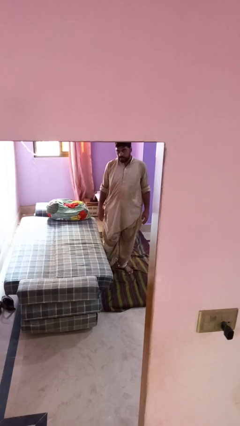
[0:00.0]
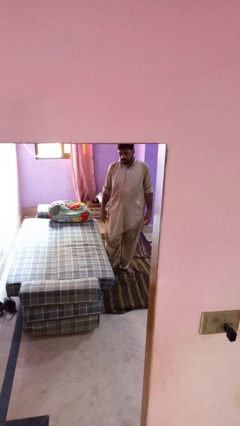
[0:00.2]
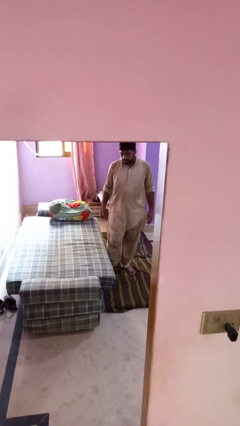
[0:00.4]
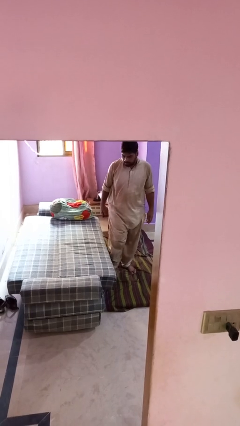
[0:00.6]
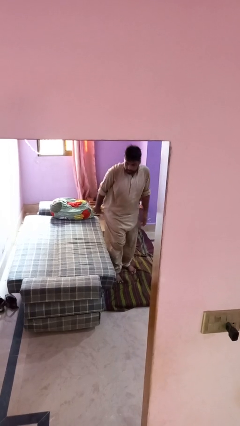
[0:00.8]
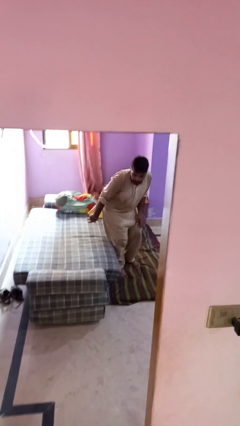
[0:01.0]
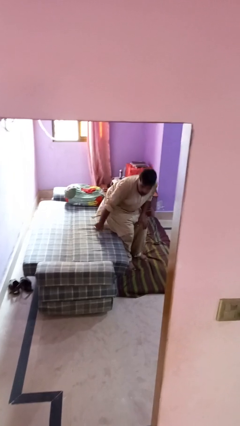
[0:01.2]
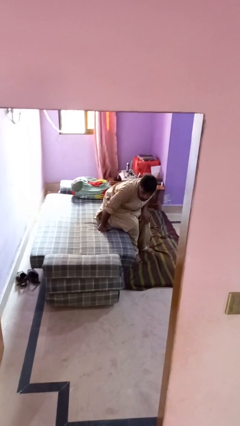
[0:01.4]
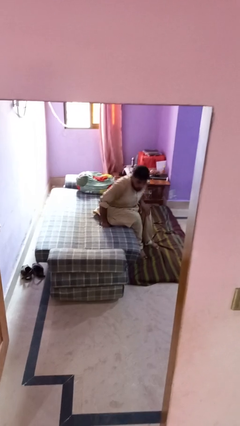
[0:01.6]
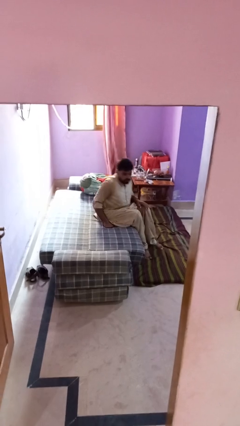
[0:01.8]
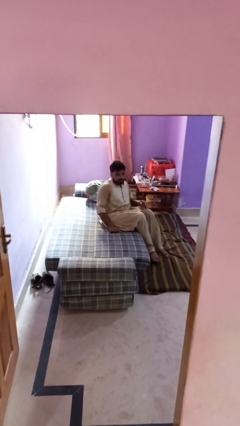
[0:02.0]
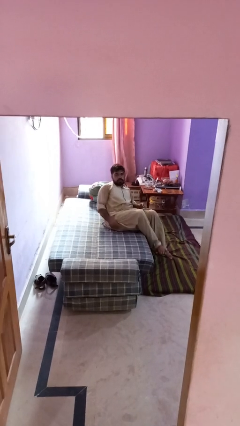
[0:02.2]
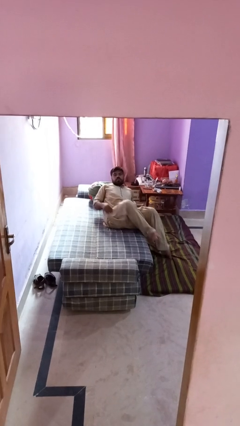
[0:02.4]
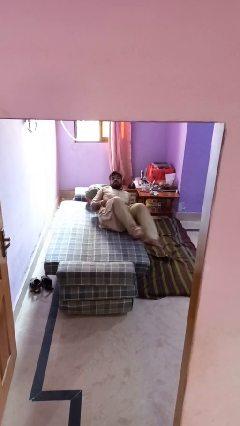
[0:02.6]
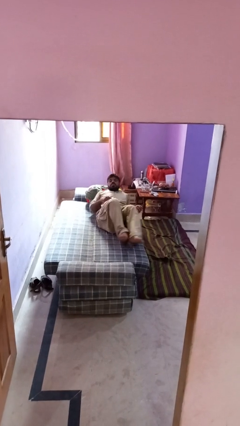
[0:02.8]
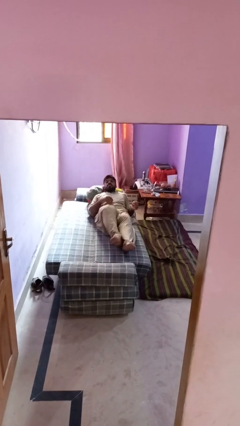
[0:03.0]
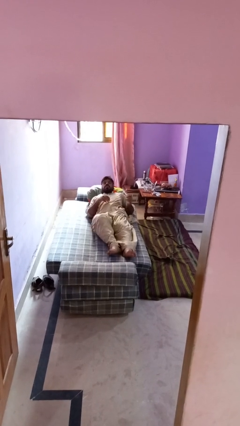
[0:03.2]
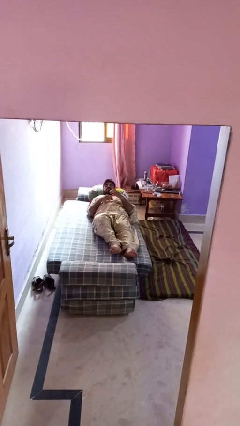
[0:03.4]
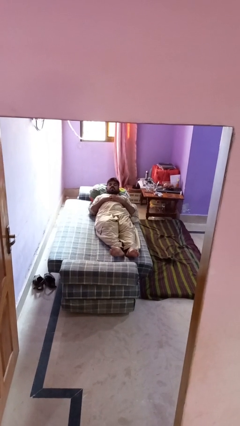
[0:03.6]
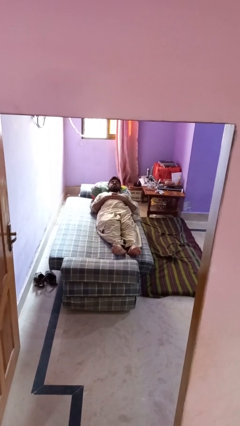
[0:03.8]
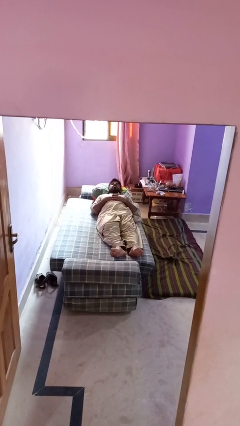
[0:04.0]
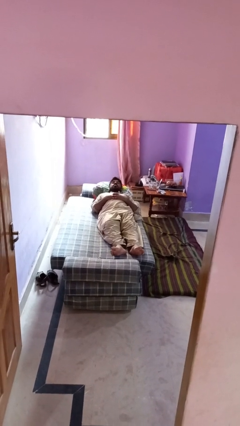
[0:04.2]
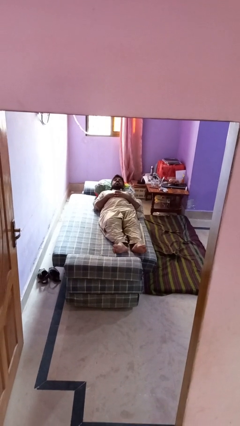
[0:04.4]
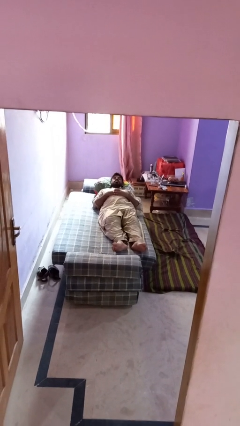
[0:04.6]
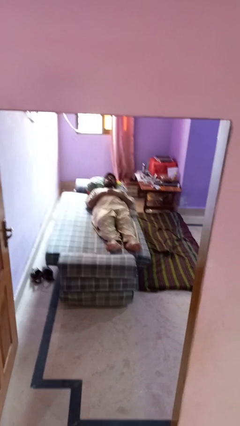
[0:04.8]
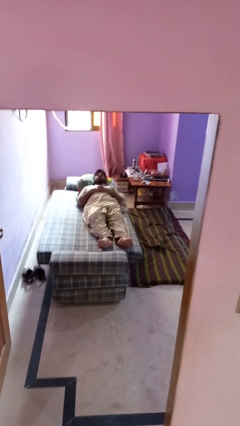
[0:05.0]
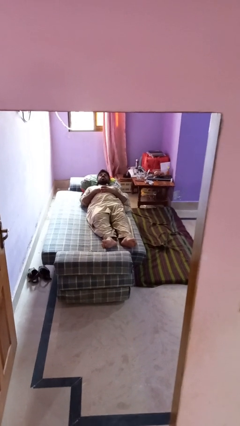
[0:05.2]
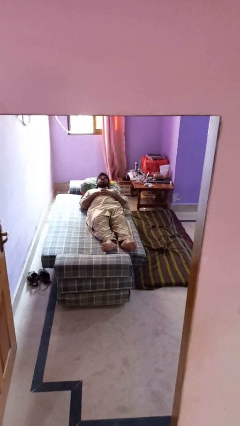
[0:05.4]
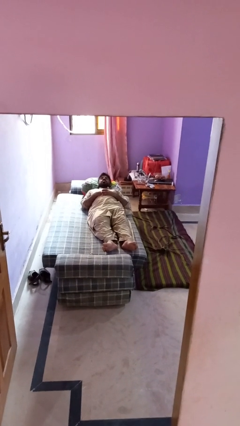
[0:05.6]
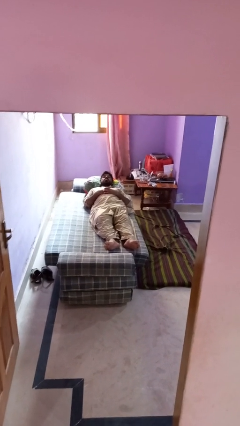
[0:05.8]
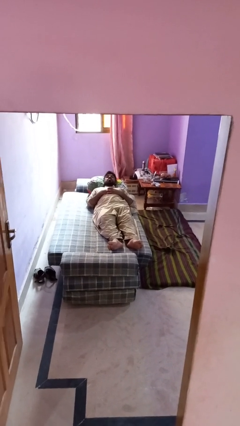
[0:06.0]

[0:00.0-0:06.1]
person lies down on bed

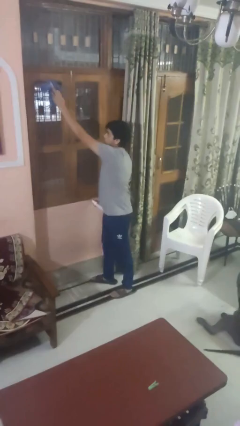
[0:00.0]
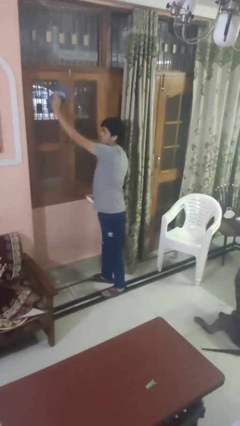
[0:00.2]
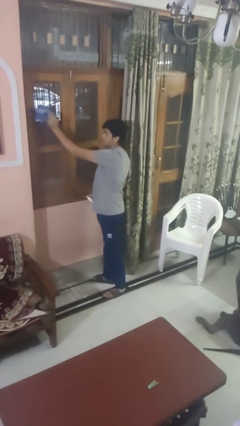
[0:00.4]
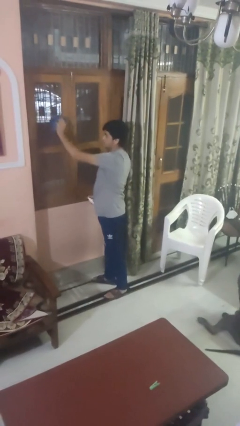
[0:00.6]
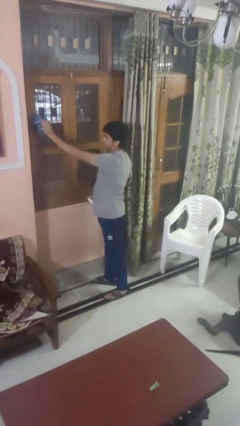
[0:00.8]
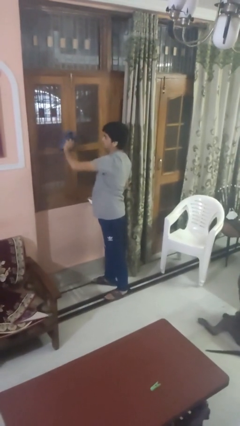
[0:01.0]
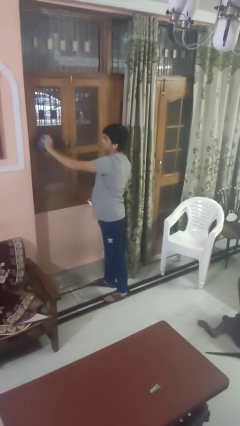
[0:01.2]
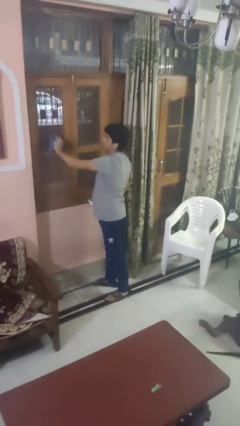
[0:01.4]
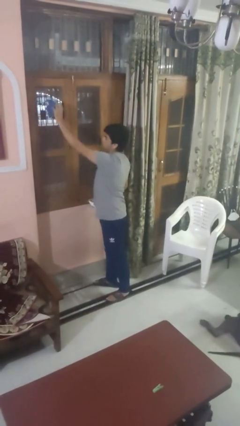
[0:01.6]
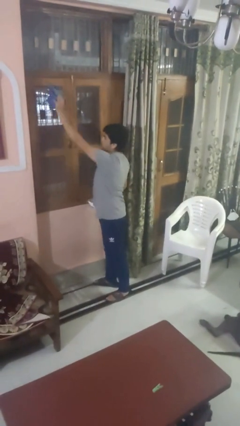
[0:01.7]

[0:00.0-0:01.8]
person washes window

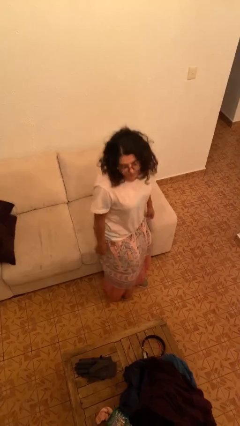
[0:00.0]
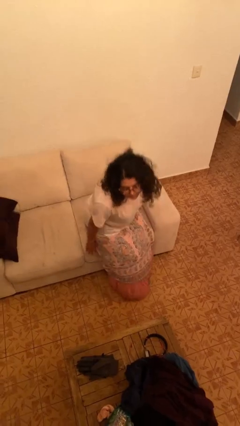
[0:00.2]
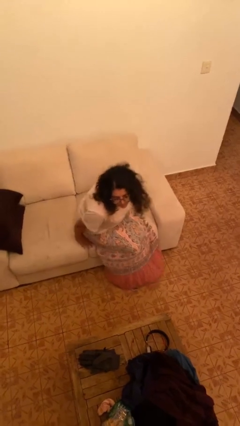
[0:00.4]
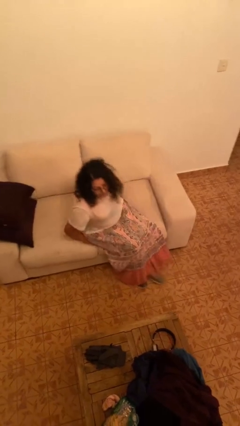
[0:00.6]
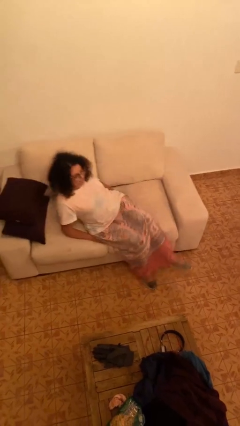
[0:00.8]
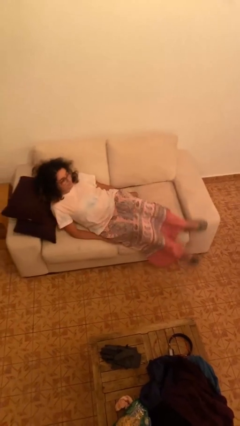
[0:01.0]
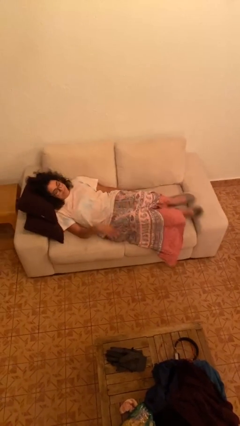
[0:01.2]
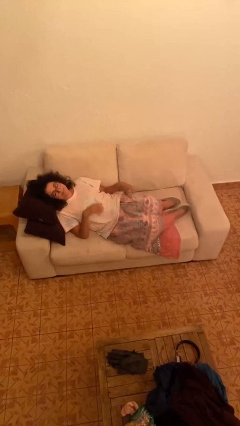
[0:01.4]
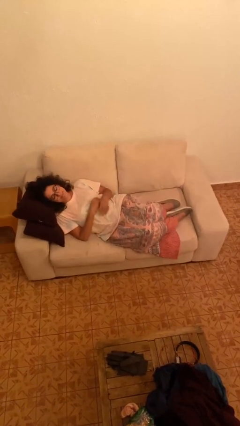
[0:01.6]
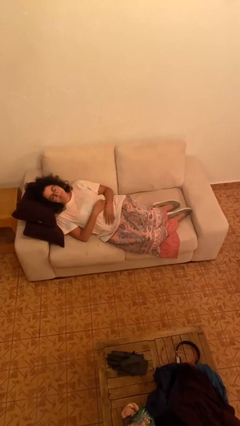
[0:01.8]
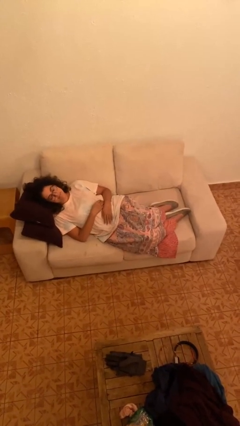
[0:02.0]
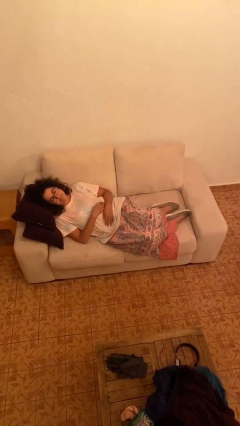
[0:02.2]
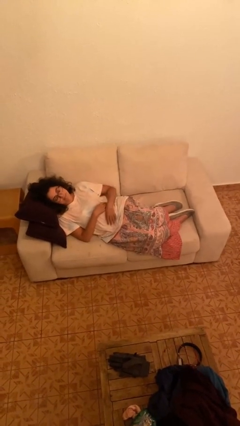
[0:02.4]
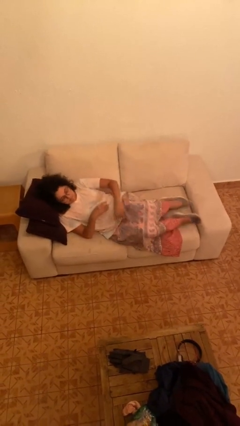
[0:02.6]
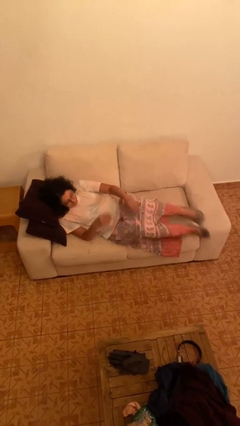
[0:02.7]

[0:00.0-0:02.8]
person lies down on couch

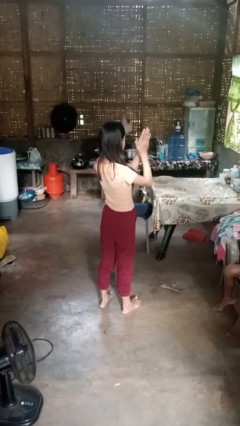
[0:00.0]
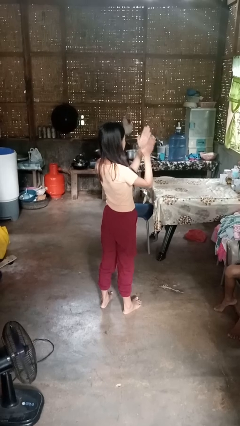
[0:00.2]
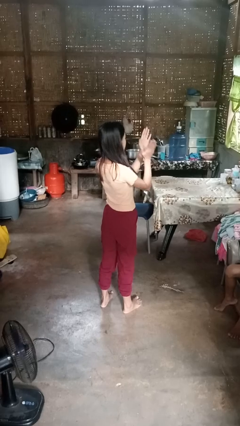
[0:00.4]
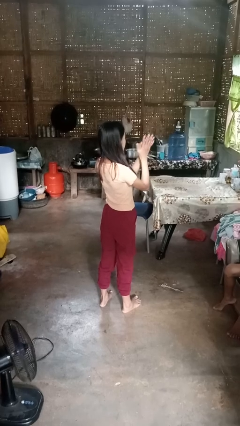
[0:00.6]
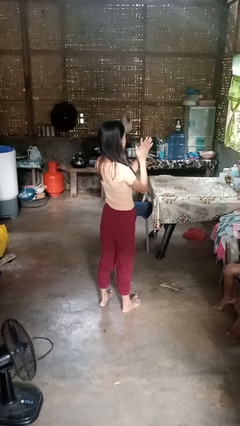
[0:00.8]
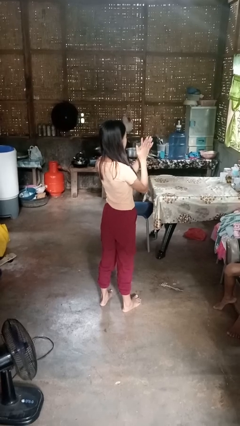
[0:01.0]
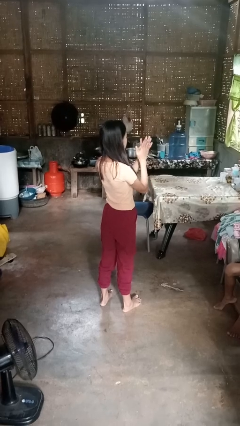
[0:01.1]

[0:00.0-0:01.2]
person claps hands

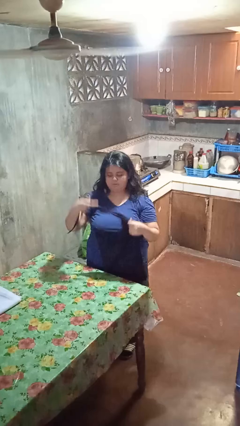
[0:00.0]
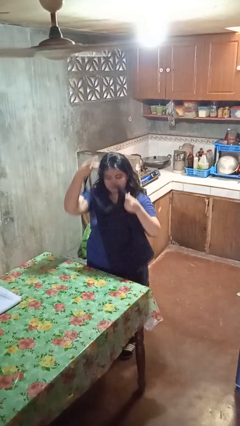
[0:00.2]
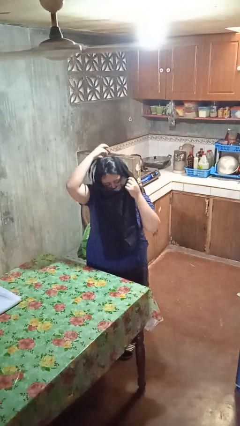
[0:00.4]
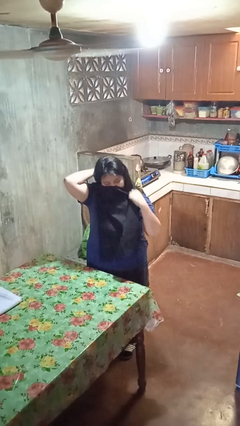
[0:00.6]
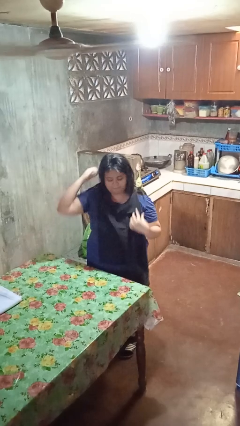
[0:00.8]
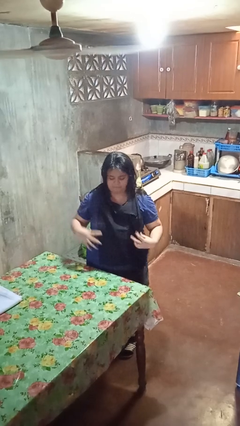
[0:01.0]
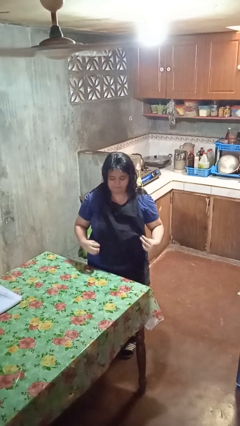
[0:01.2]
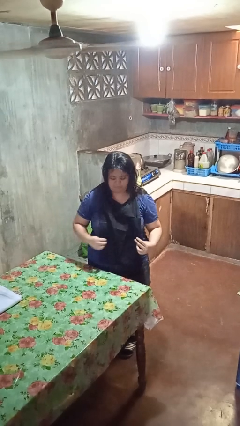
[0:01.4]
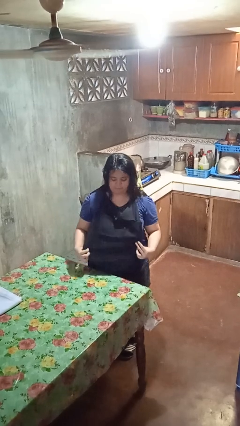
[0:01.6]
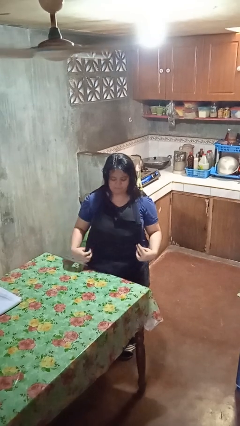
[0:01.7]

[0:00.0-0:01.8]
person puts on apron

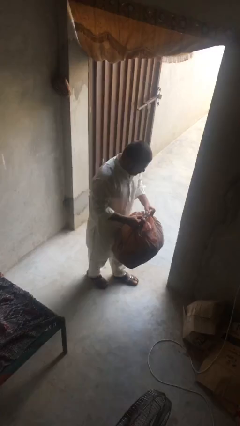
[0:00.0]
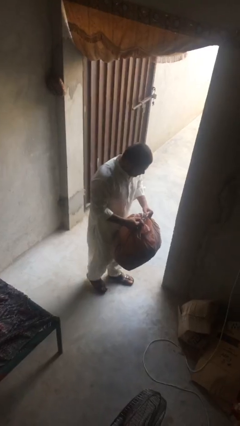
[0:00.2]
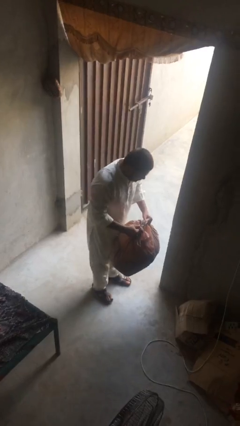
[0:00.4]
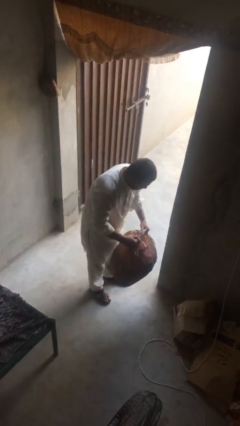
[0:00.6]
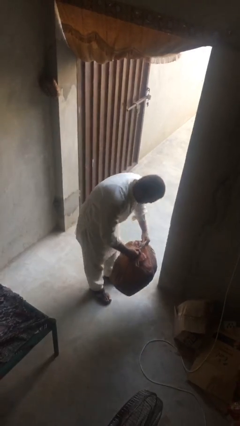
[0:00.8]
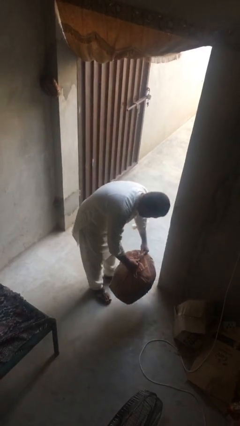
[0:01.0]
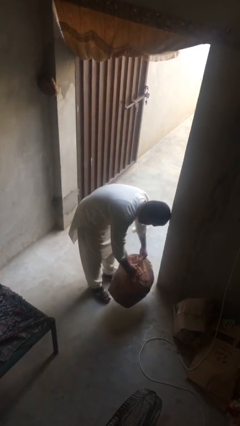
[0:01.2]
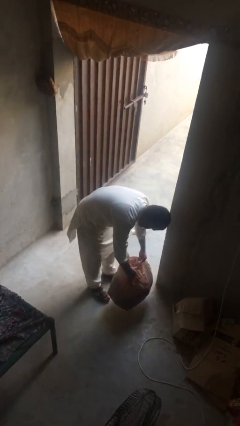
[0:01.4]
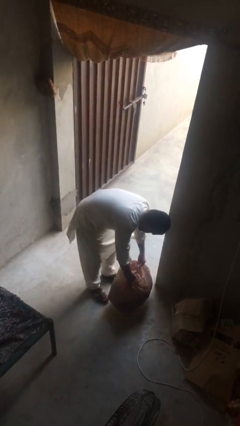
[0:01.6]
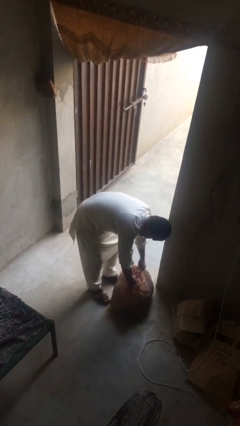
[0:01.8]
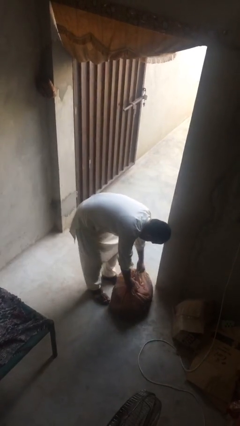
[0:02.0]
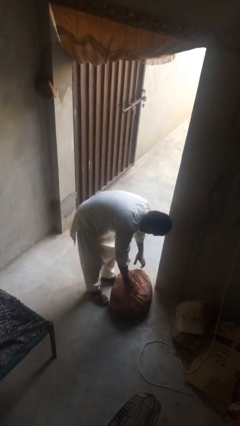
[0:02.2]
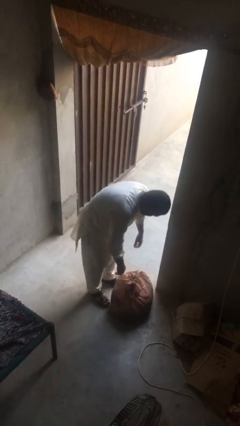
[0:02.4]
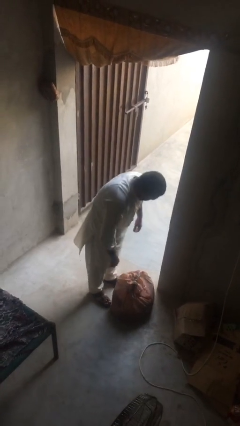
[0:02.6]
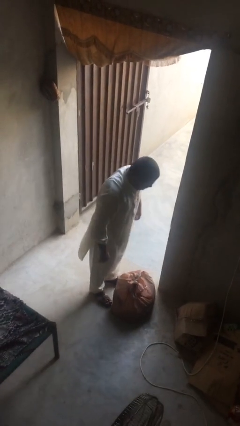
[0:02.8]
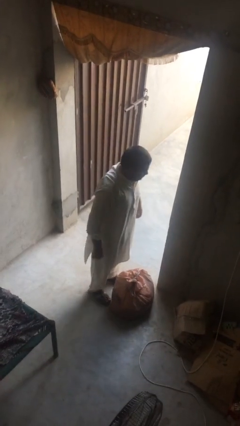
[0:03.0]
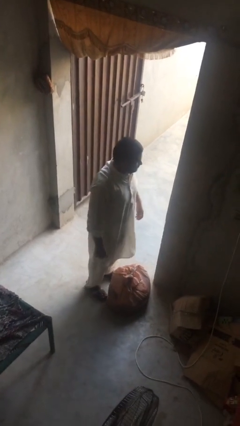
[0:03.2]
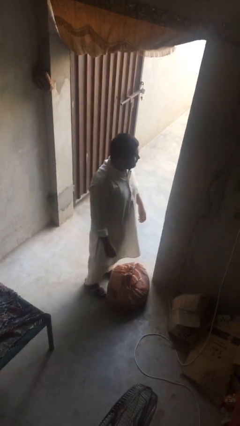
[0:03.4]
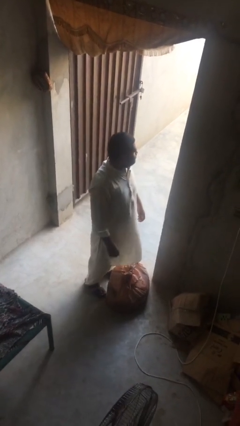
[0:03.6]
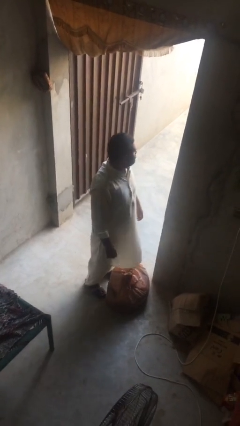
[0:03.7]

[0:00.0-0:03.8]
person puts down object on floor
